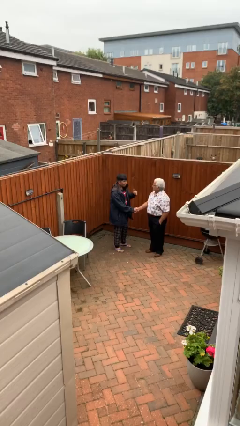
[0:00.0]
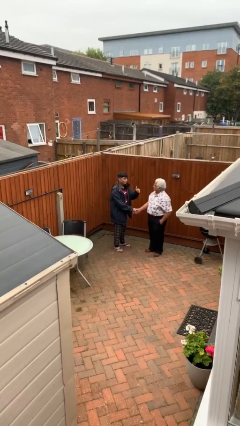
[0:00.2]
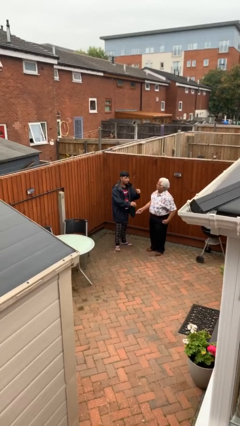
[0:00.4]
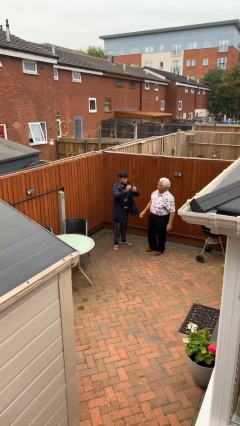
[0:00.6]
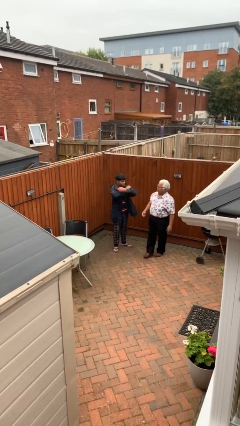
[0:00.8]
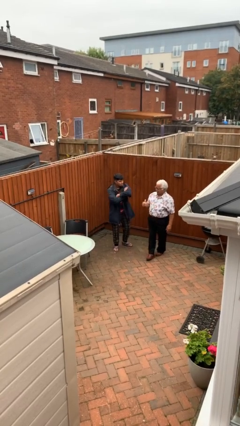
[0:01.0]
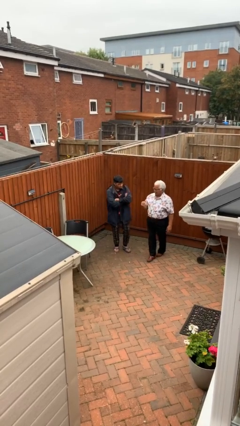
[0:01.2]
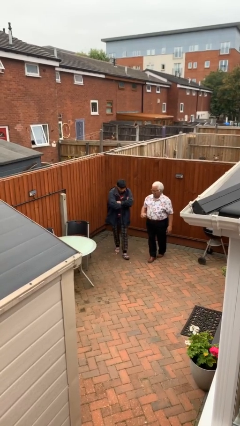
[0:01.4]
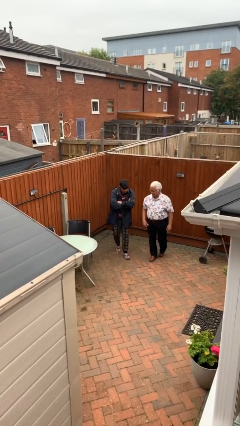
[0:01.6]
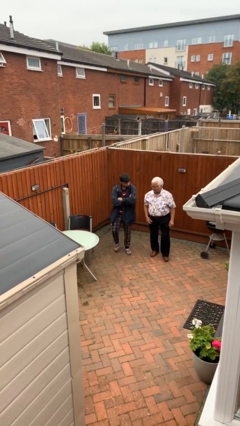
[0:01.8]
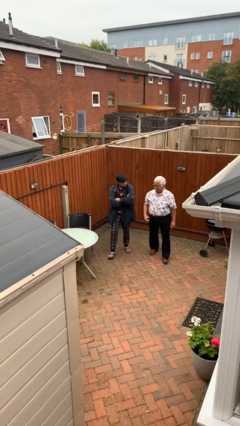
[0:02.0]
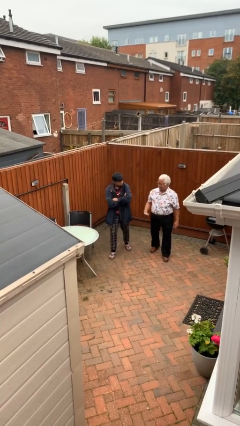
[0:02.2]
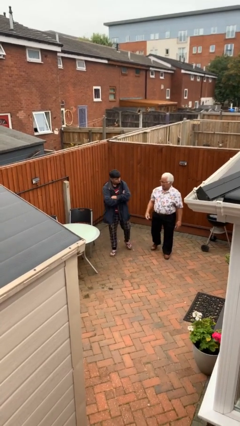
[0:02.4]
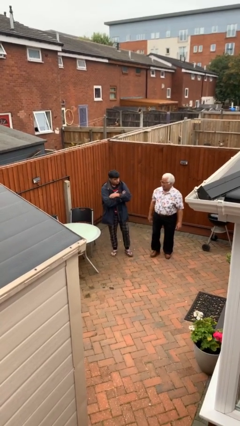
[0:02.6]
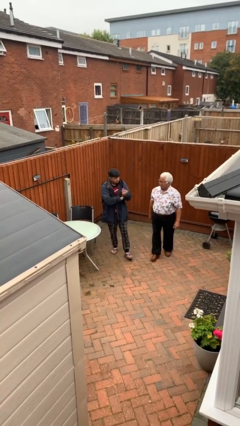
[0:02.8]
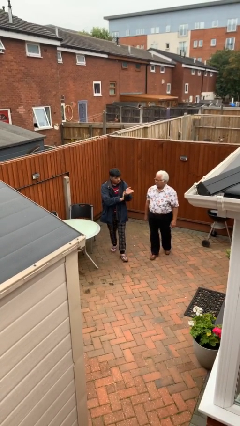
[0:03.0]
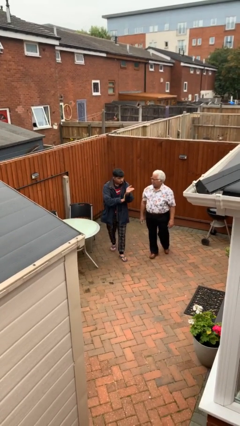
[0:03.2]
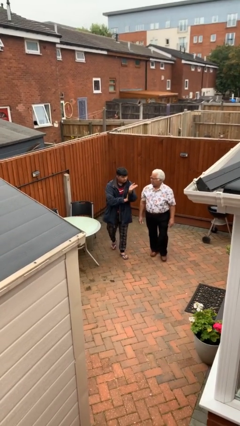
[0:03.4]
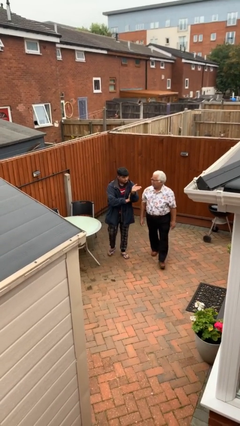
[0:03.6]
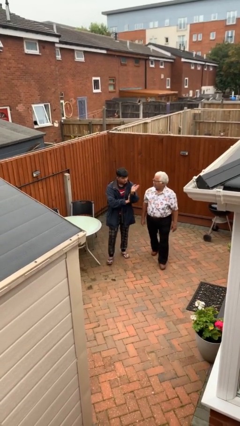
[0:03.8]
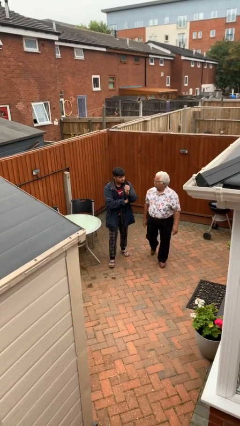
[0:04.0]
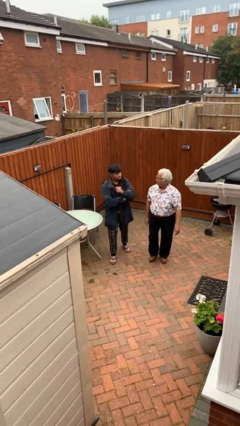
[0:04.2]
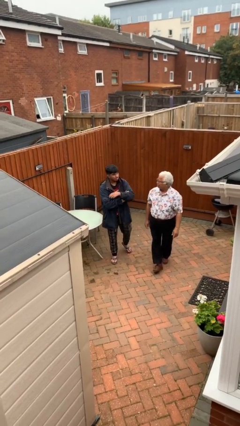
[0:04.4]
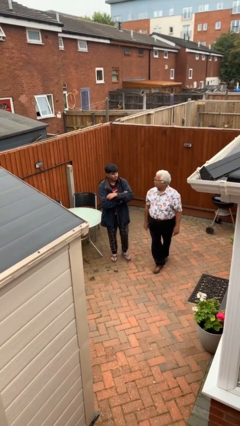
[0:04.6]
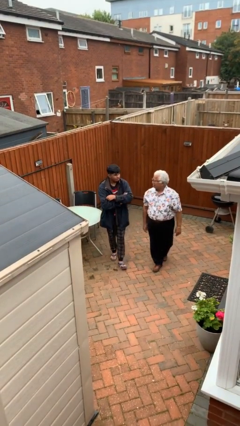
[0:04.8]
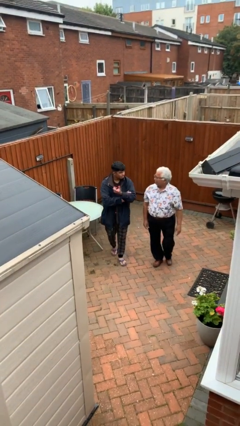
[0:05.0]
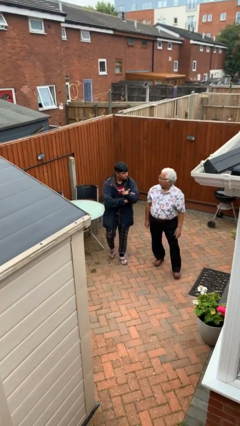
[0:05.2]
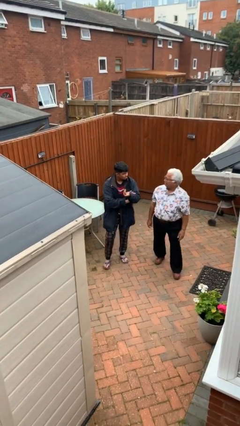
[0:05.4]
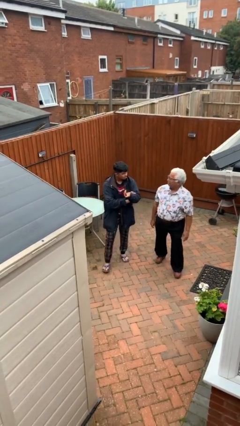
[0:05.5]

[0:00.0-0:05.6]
person talks to person

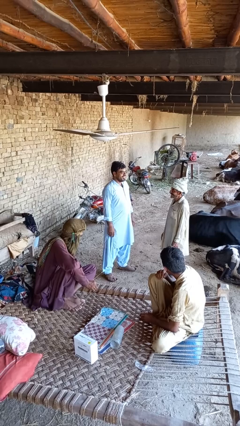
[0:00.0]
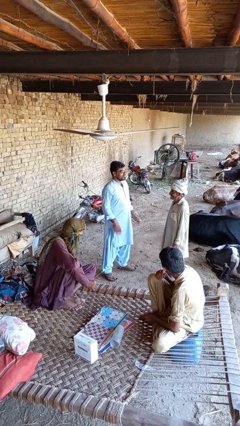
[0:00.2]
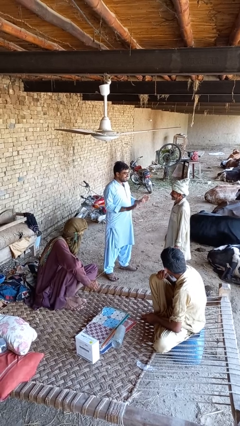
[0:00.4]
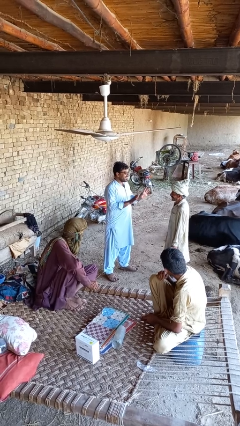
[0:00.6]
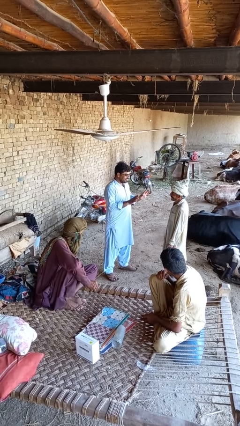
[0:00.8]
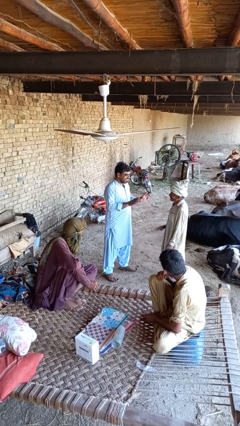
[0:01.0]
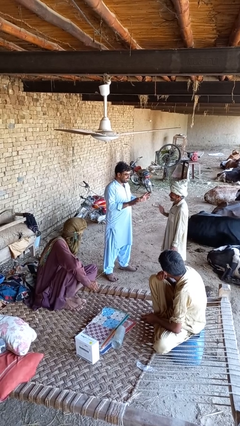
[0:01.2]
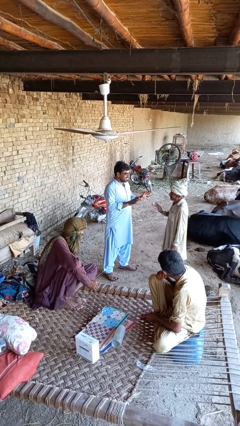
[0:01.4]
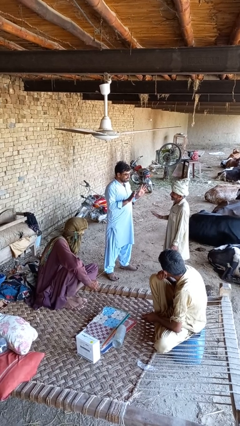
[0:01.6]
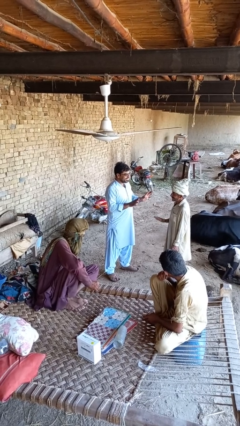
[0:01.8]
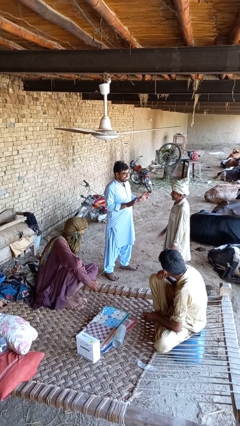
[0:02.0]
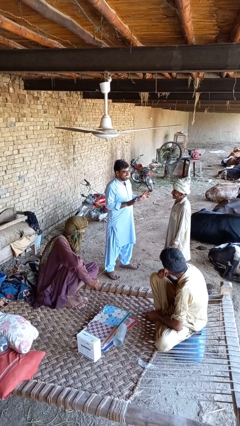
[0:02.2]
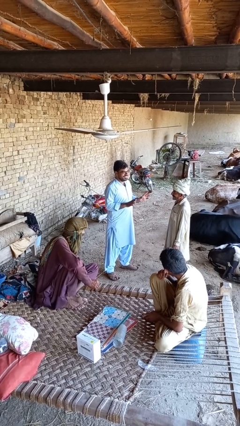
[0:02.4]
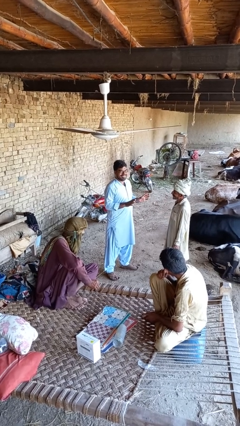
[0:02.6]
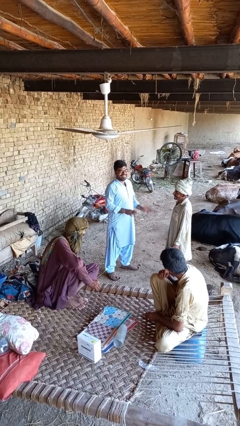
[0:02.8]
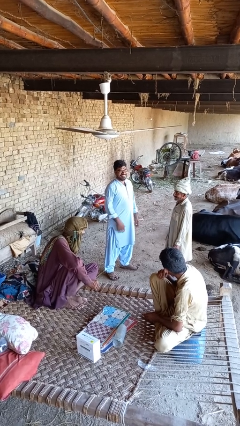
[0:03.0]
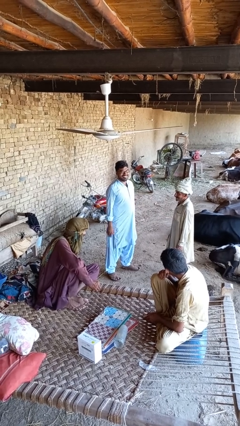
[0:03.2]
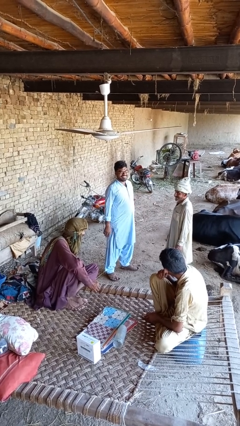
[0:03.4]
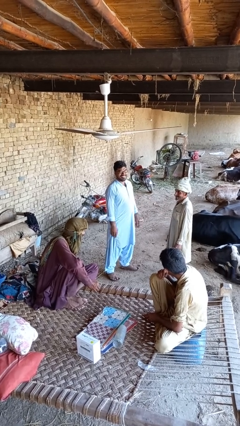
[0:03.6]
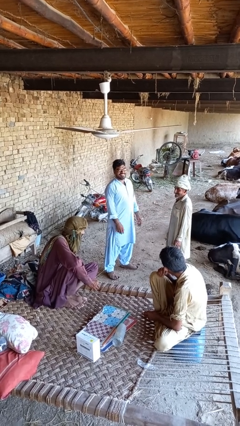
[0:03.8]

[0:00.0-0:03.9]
person laughs with person

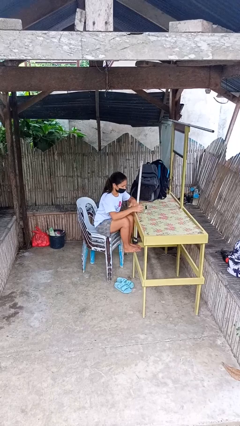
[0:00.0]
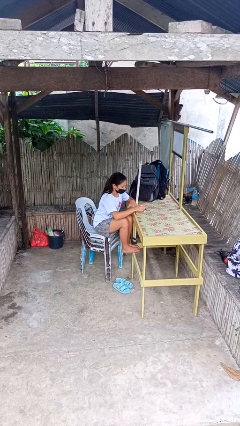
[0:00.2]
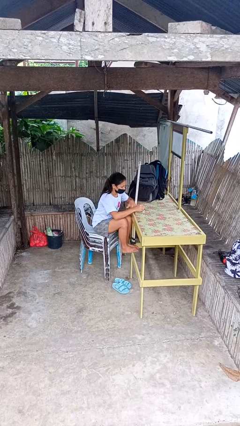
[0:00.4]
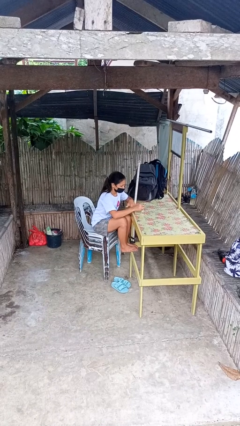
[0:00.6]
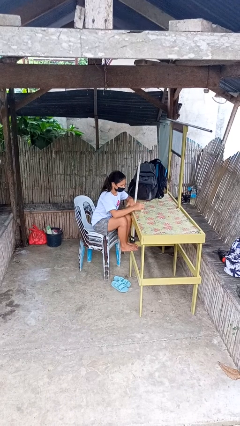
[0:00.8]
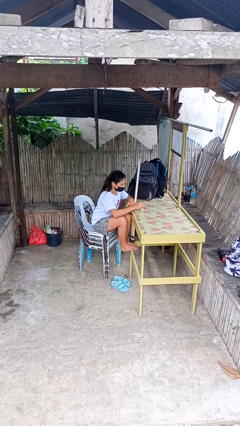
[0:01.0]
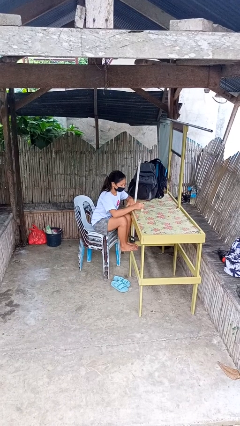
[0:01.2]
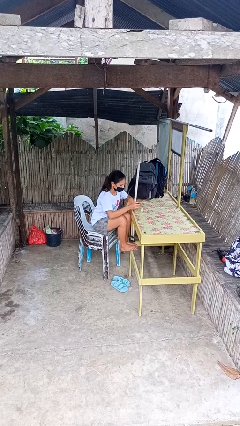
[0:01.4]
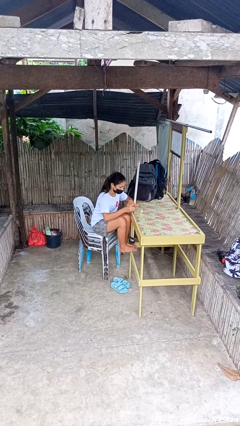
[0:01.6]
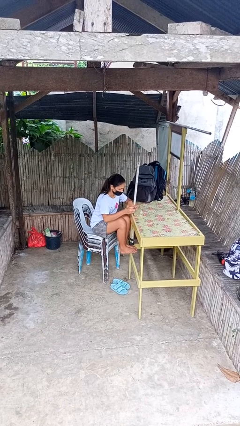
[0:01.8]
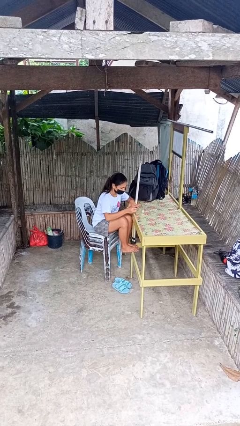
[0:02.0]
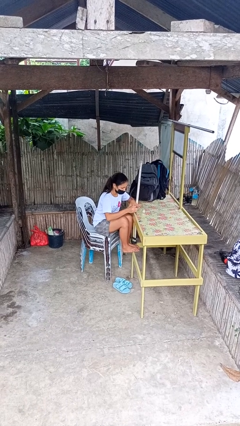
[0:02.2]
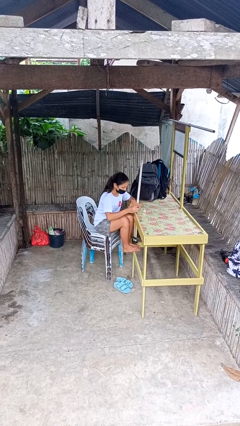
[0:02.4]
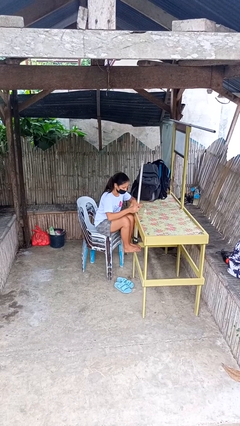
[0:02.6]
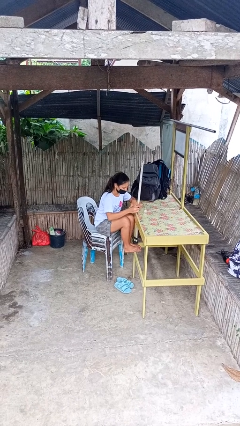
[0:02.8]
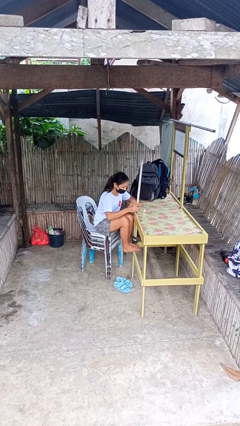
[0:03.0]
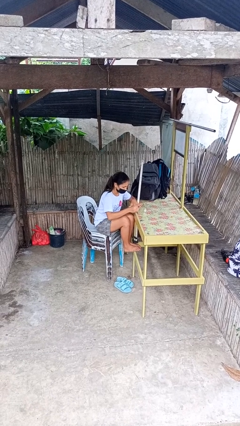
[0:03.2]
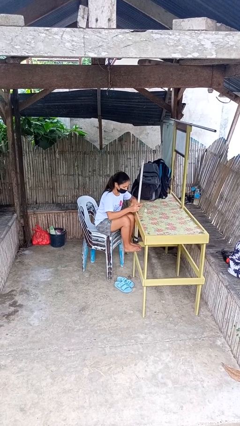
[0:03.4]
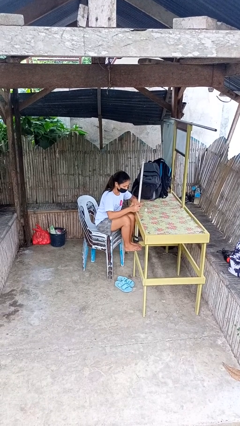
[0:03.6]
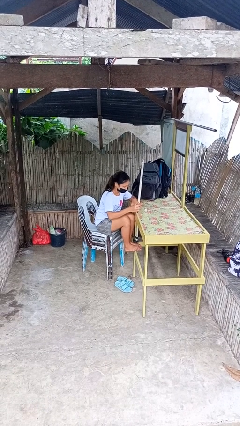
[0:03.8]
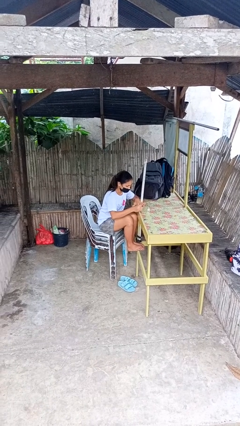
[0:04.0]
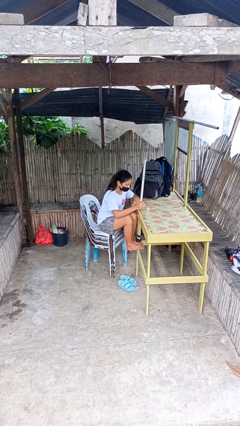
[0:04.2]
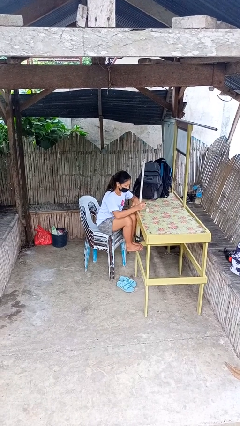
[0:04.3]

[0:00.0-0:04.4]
person paints fingernails

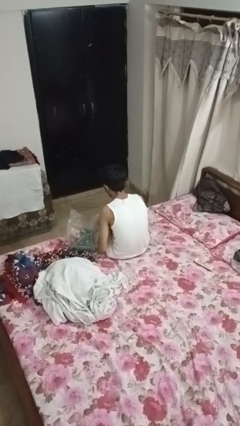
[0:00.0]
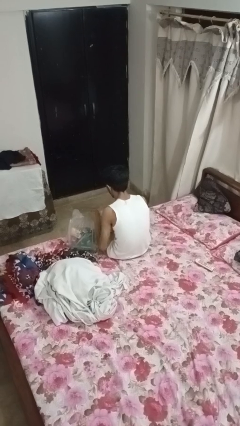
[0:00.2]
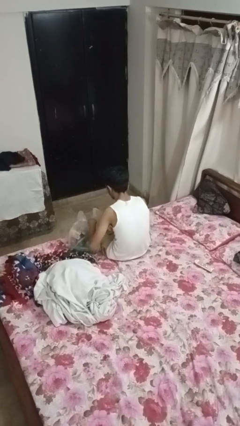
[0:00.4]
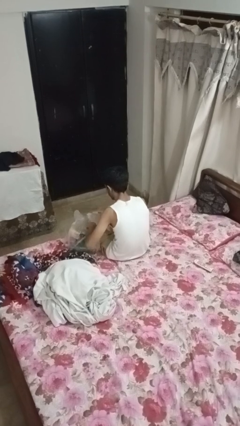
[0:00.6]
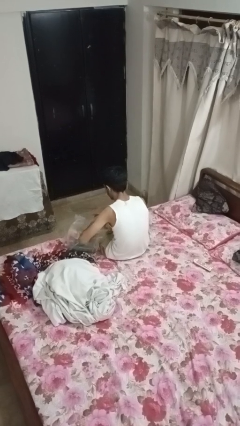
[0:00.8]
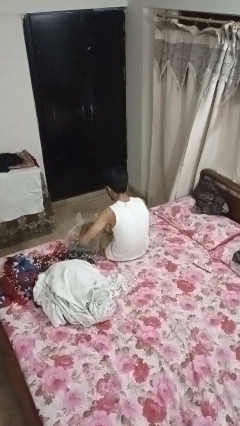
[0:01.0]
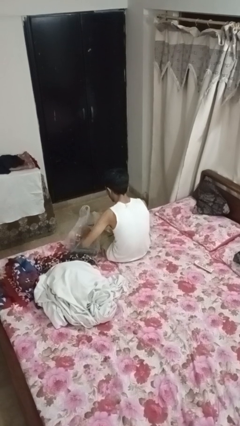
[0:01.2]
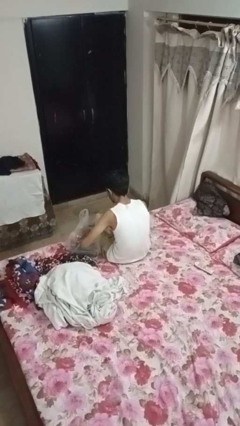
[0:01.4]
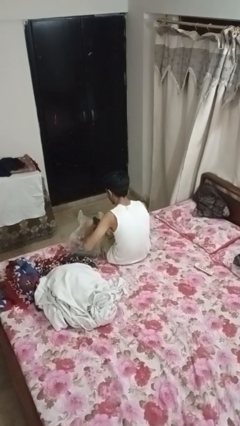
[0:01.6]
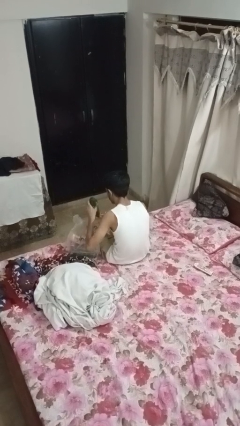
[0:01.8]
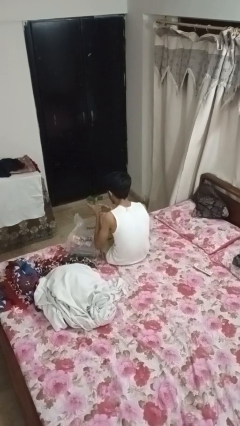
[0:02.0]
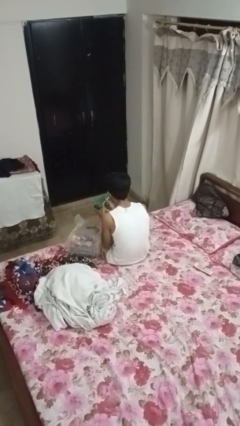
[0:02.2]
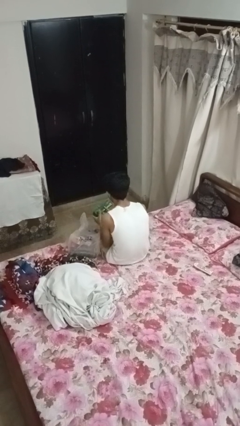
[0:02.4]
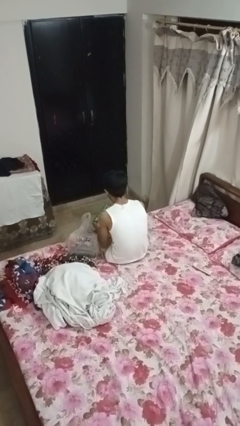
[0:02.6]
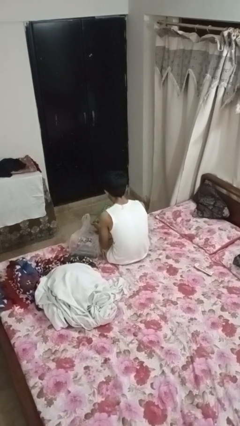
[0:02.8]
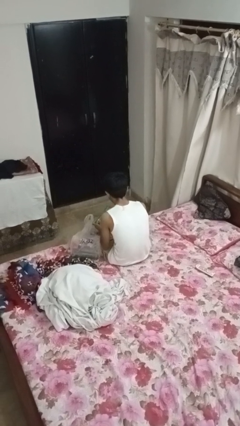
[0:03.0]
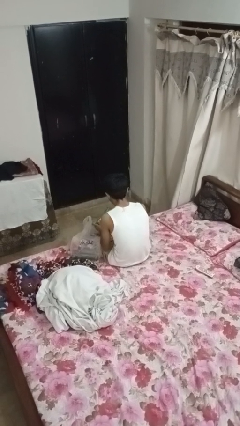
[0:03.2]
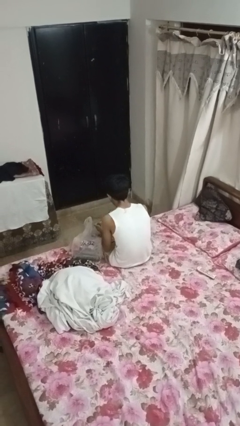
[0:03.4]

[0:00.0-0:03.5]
person takes object from bag

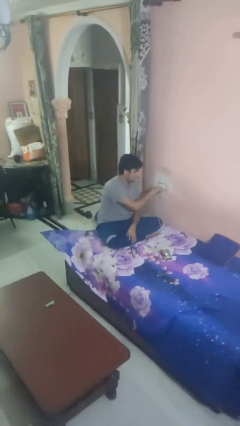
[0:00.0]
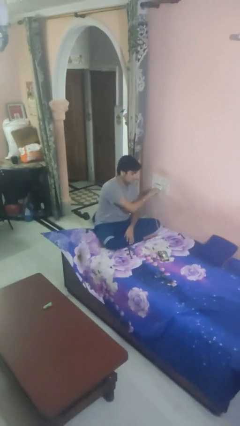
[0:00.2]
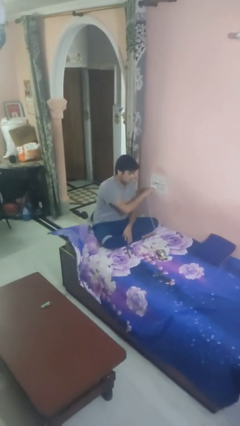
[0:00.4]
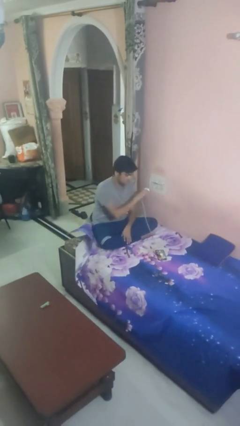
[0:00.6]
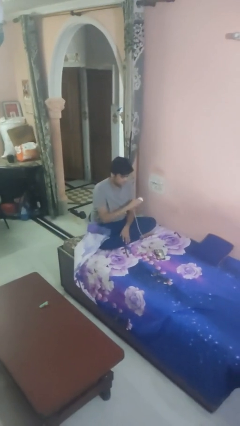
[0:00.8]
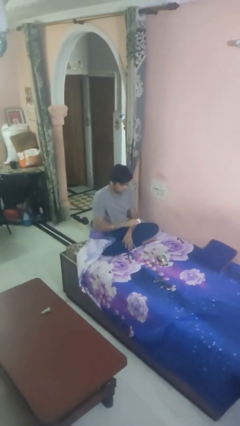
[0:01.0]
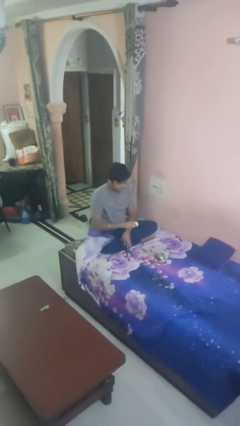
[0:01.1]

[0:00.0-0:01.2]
person unplugs from electrical socket
